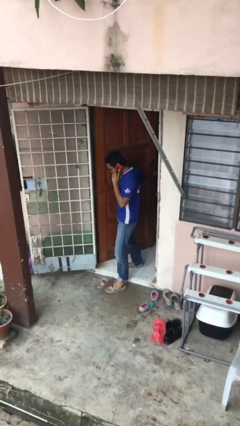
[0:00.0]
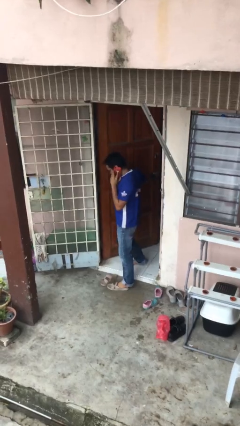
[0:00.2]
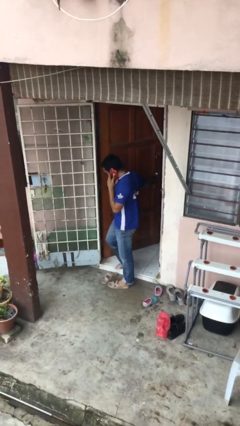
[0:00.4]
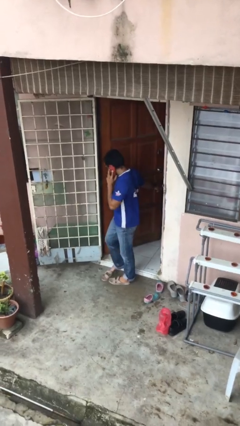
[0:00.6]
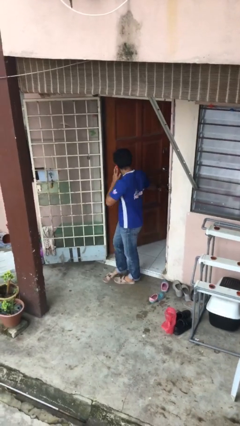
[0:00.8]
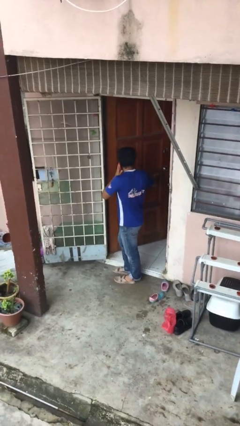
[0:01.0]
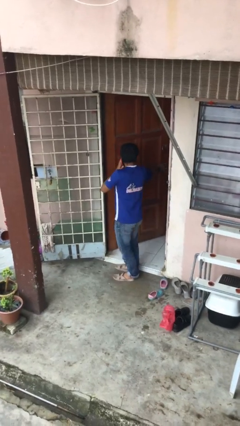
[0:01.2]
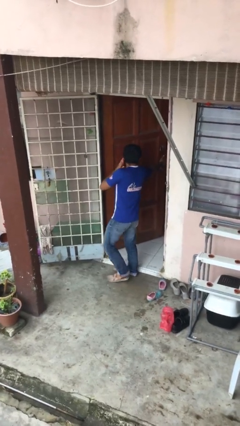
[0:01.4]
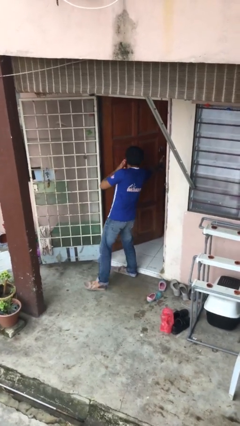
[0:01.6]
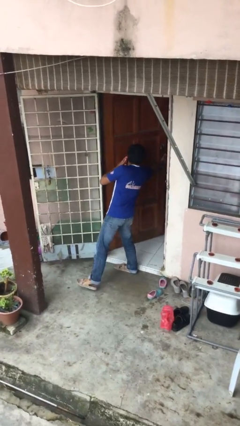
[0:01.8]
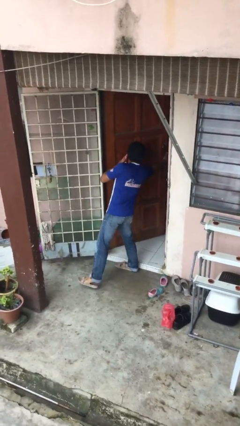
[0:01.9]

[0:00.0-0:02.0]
person enters scene through structure

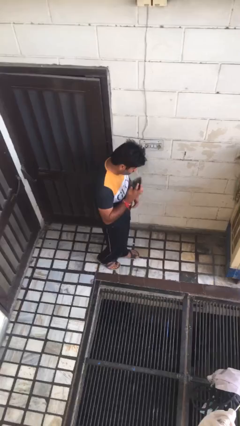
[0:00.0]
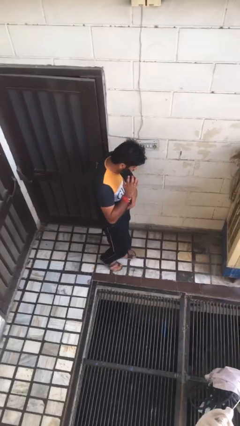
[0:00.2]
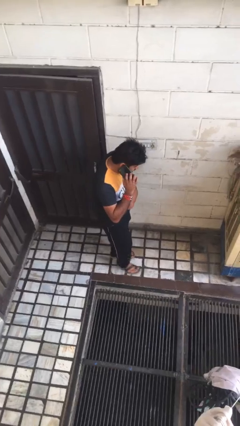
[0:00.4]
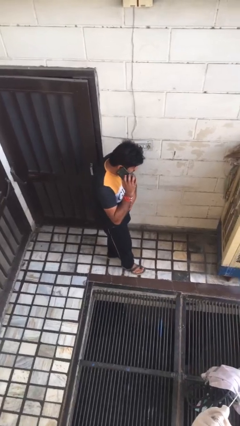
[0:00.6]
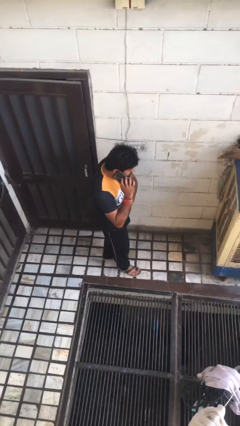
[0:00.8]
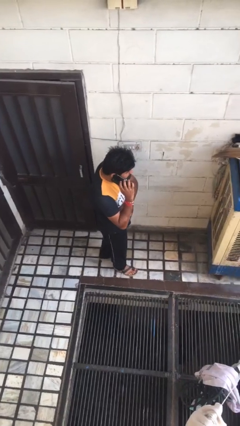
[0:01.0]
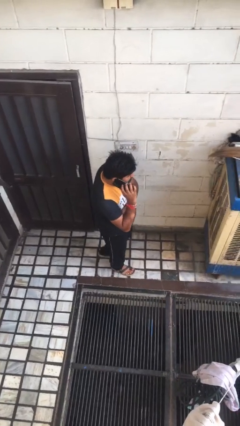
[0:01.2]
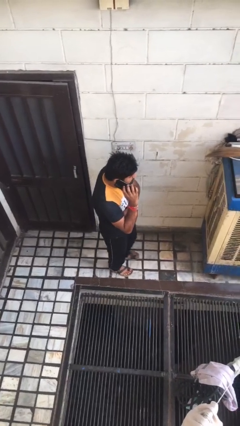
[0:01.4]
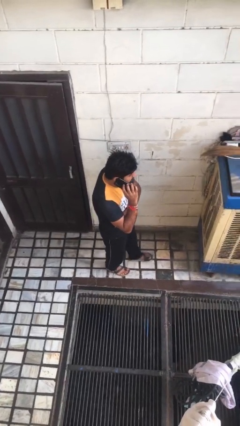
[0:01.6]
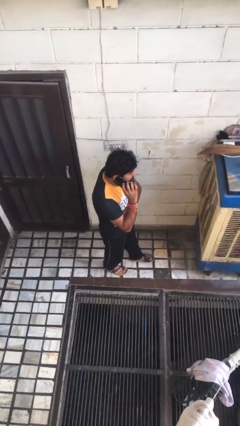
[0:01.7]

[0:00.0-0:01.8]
person talks on phone

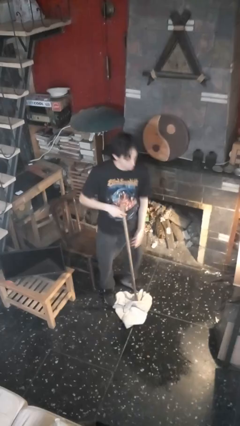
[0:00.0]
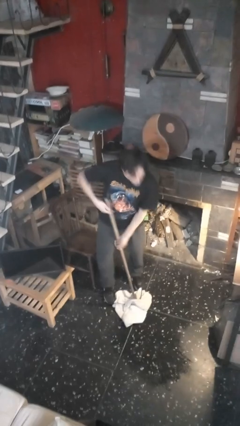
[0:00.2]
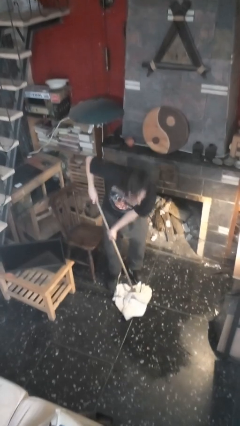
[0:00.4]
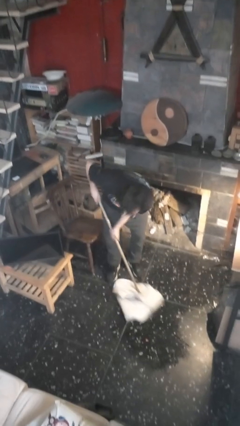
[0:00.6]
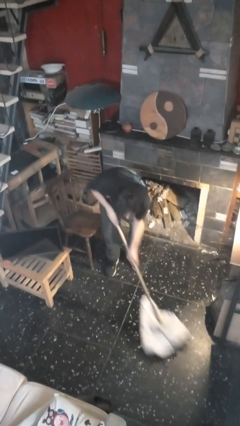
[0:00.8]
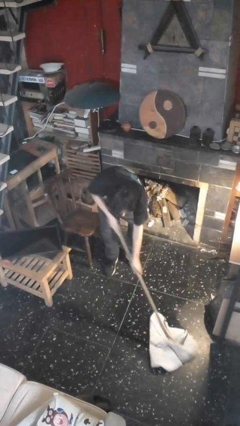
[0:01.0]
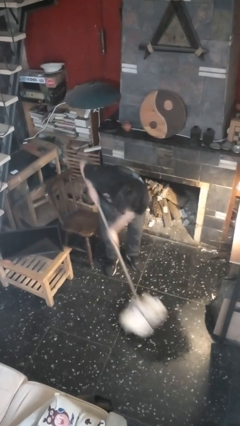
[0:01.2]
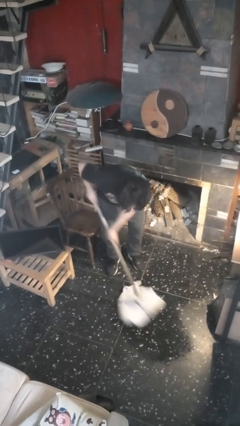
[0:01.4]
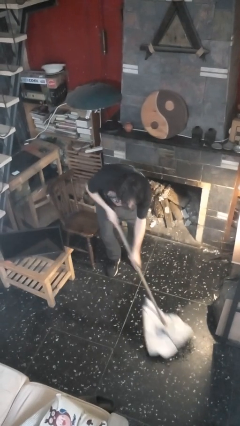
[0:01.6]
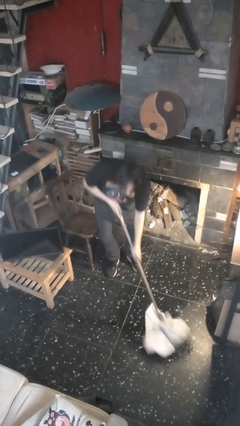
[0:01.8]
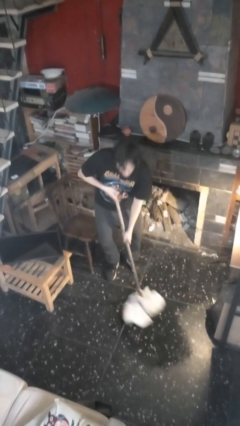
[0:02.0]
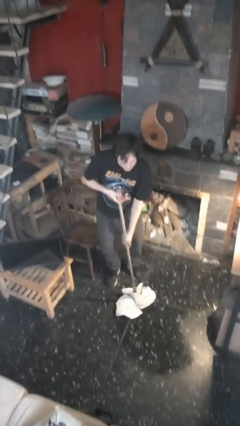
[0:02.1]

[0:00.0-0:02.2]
person mops

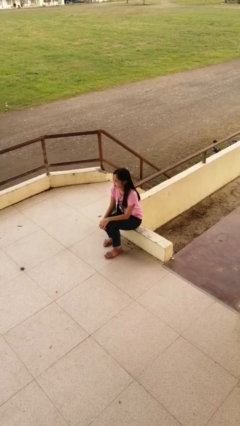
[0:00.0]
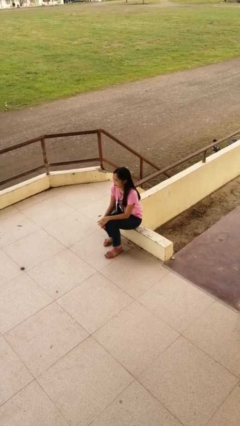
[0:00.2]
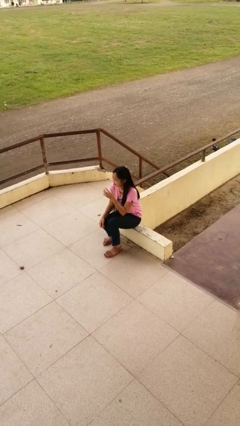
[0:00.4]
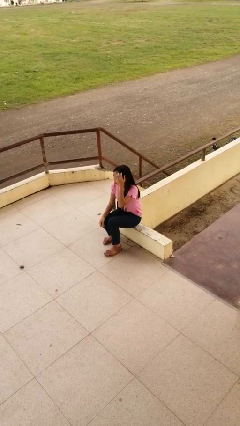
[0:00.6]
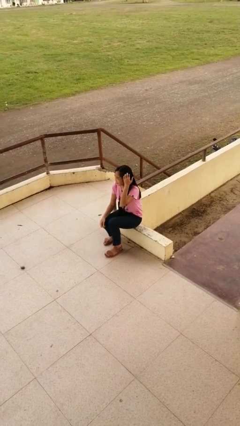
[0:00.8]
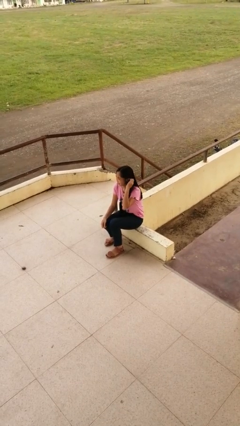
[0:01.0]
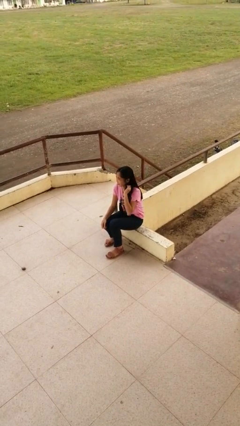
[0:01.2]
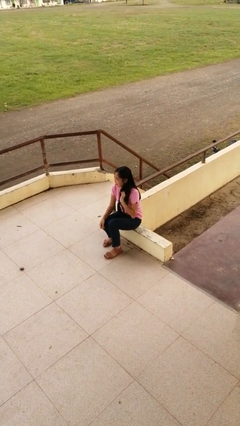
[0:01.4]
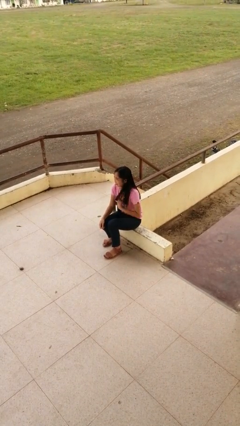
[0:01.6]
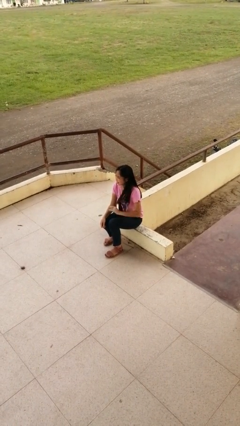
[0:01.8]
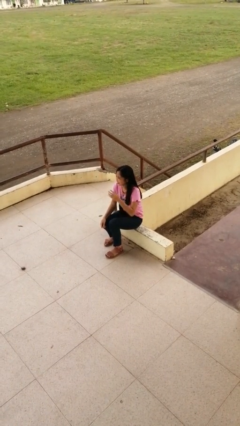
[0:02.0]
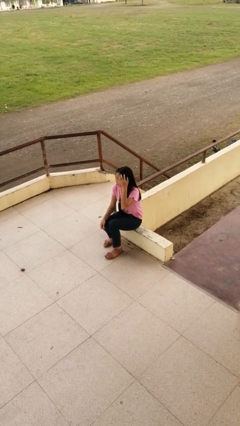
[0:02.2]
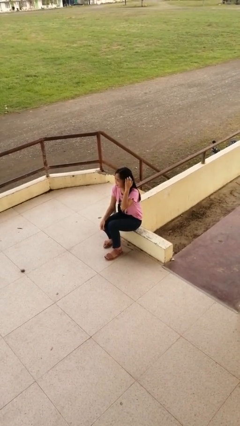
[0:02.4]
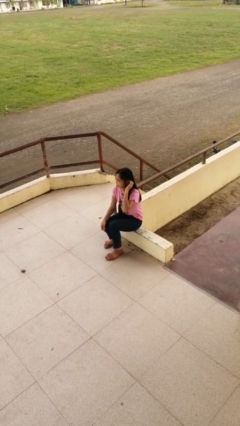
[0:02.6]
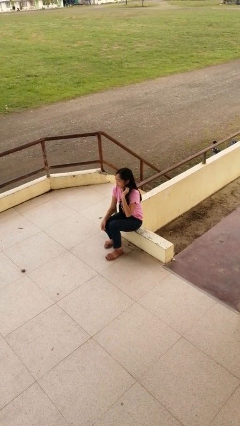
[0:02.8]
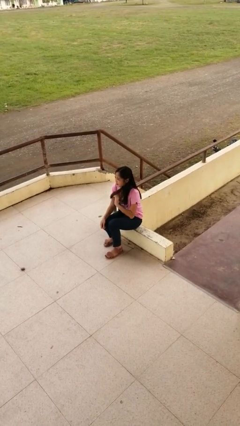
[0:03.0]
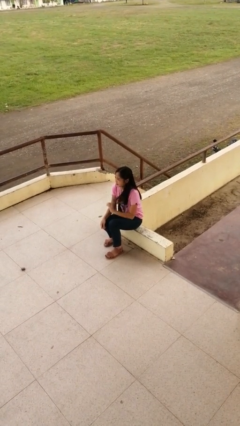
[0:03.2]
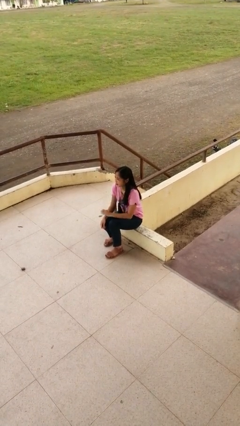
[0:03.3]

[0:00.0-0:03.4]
person strokes hair

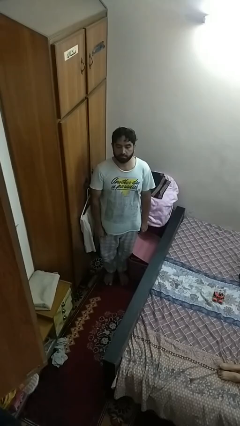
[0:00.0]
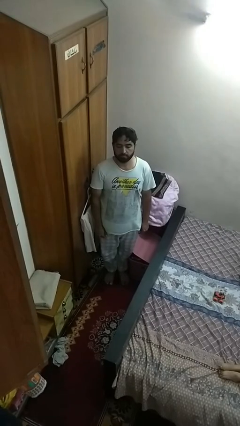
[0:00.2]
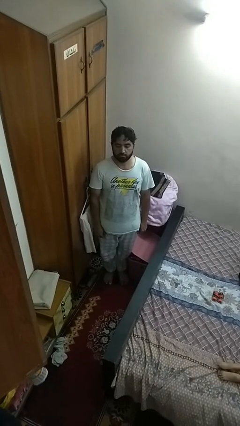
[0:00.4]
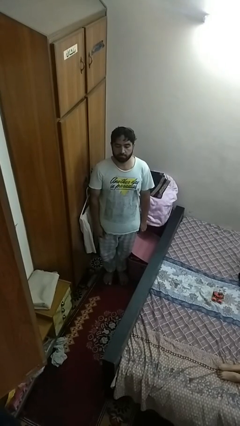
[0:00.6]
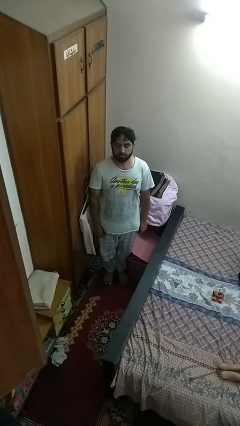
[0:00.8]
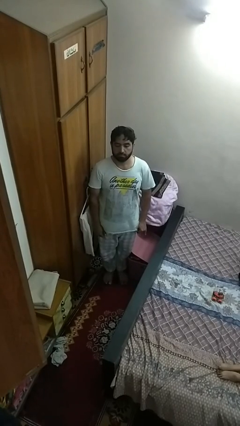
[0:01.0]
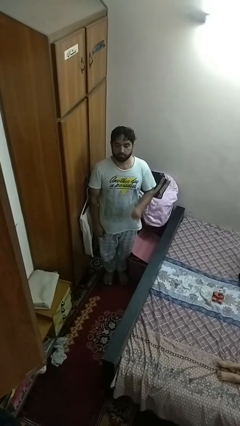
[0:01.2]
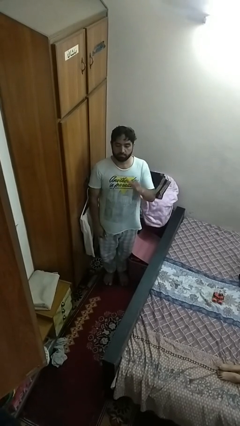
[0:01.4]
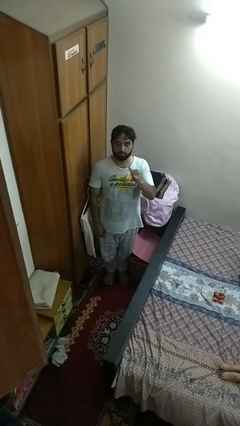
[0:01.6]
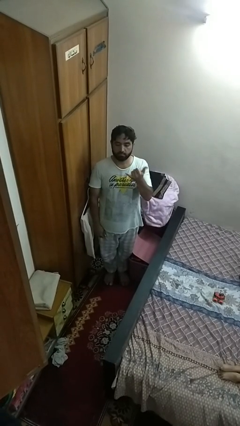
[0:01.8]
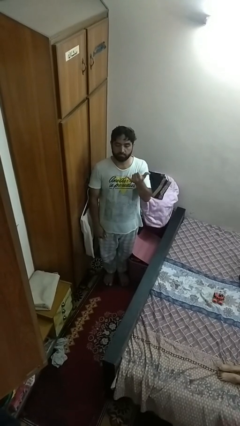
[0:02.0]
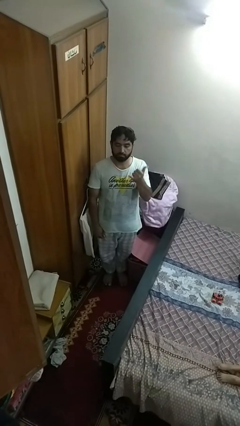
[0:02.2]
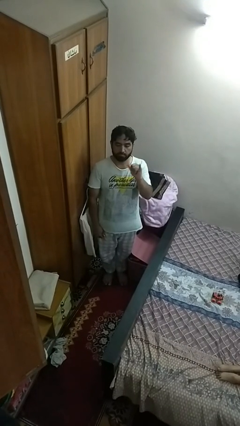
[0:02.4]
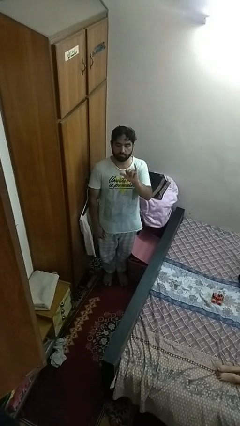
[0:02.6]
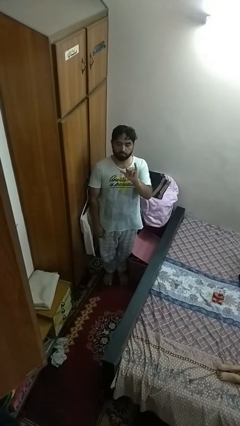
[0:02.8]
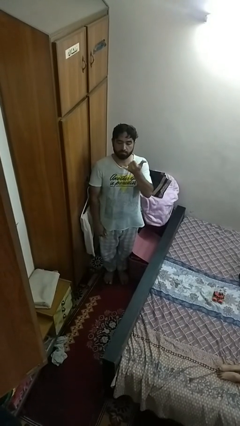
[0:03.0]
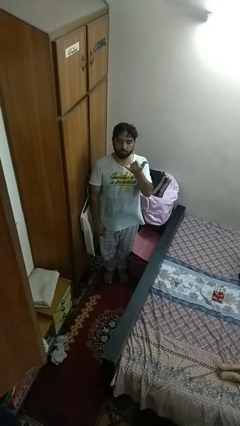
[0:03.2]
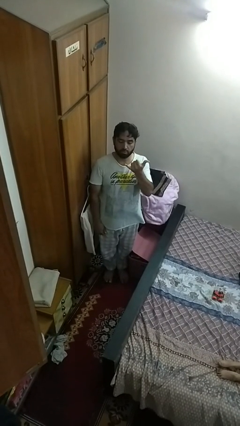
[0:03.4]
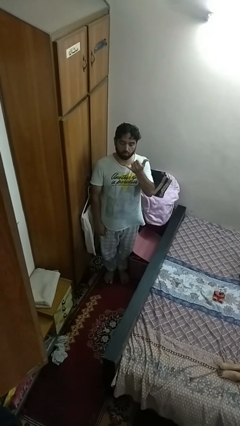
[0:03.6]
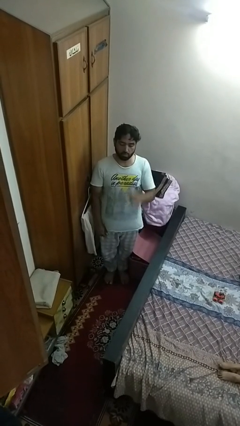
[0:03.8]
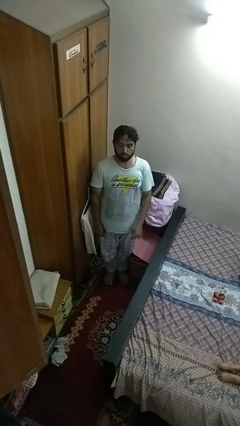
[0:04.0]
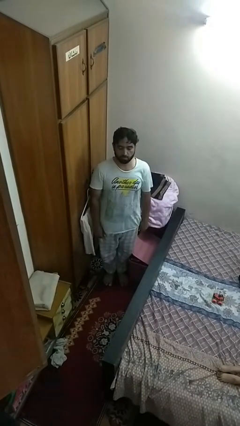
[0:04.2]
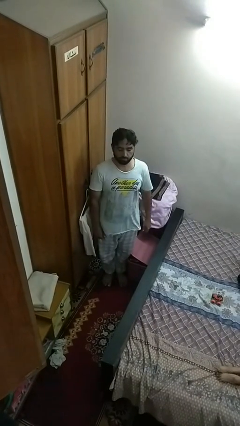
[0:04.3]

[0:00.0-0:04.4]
person gestures hang loose

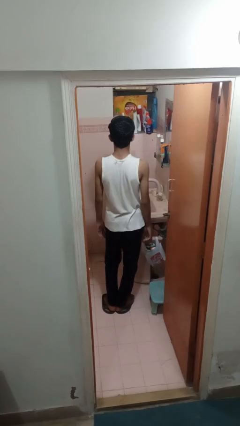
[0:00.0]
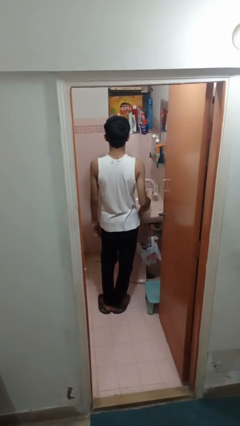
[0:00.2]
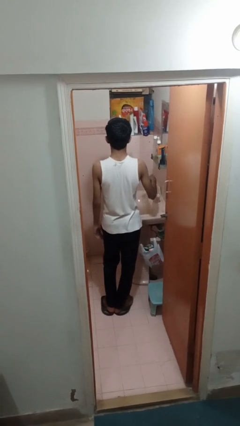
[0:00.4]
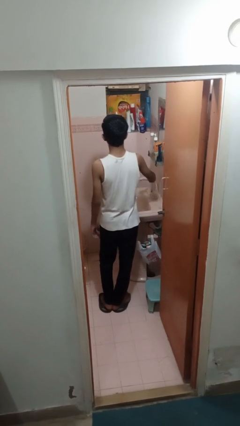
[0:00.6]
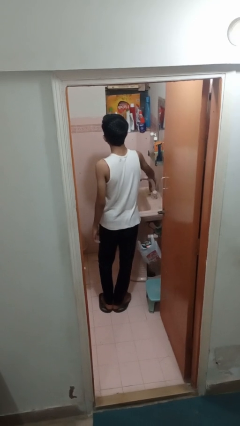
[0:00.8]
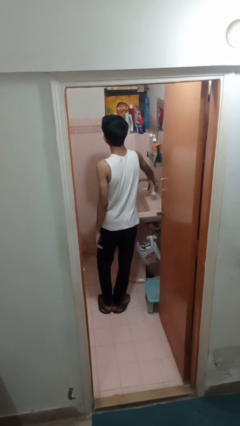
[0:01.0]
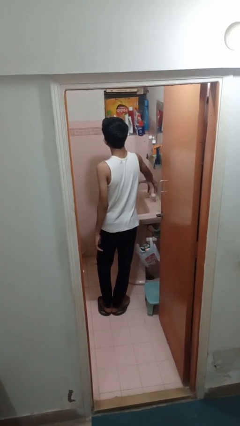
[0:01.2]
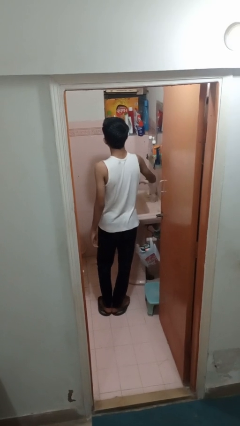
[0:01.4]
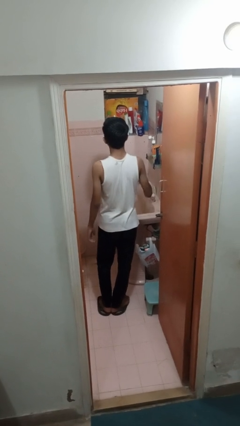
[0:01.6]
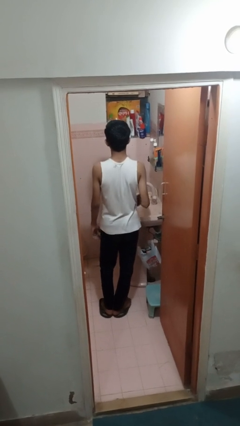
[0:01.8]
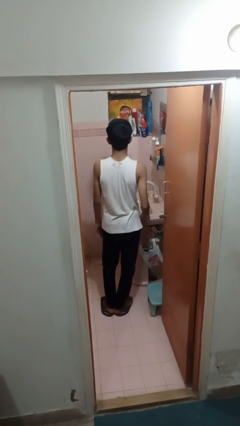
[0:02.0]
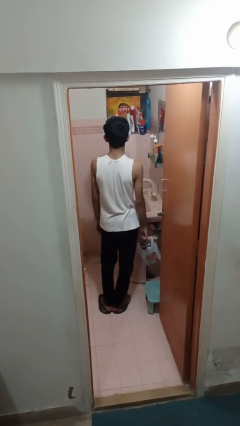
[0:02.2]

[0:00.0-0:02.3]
person turns off faucet

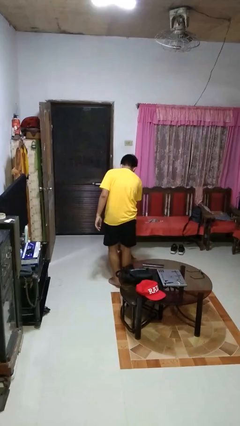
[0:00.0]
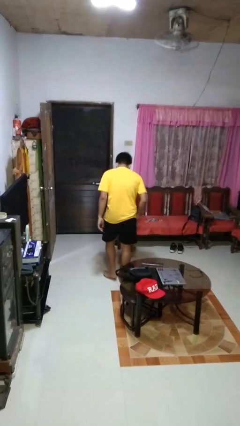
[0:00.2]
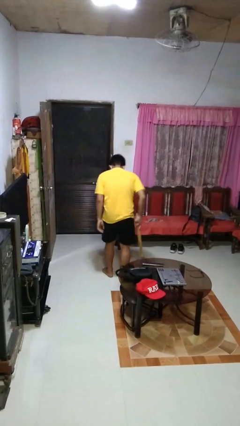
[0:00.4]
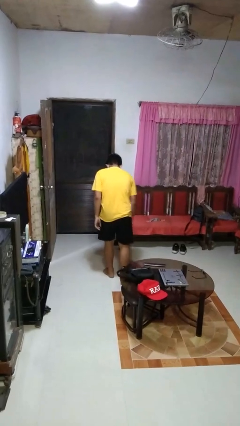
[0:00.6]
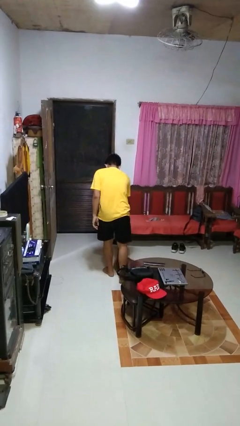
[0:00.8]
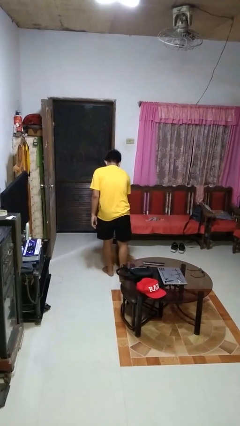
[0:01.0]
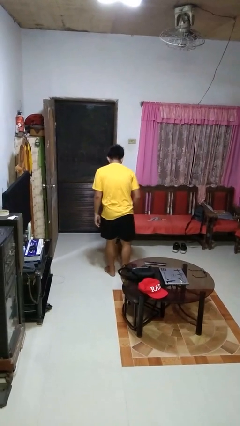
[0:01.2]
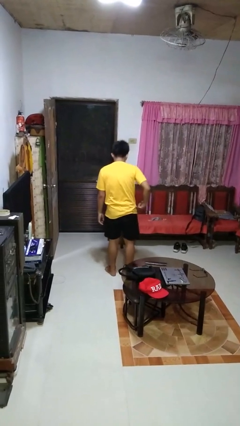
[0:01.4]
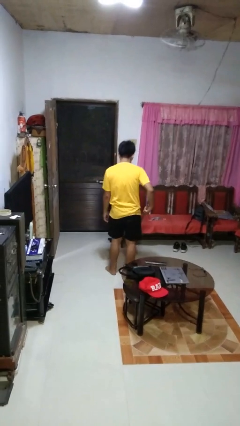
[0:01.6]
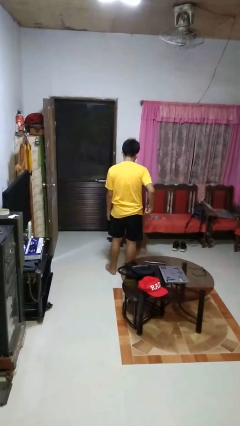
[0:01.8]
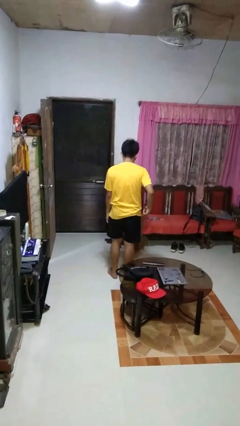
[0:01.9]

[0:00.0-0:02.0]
person sweeps floor
